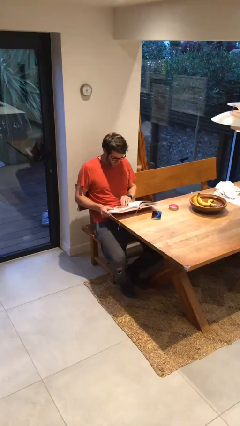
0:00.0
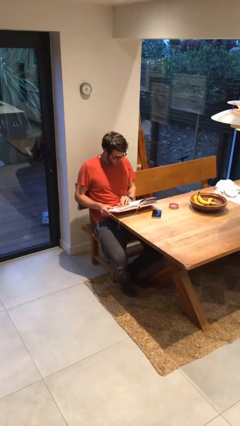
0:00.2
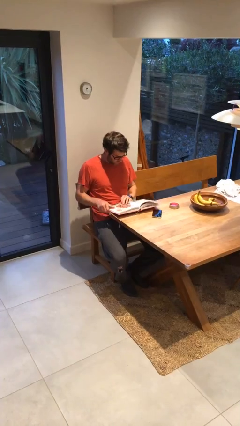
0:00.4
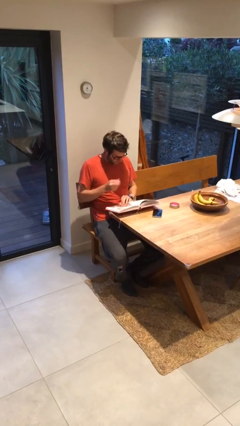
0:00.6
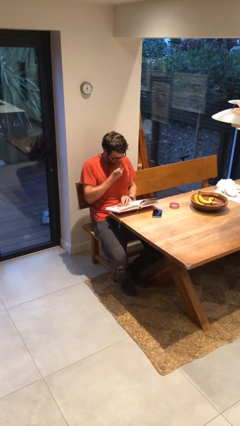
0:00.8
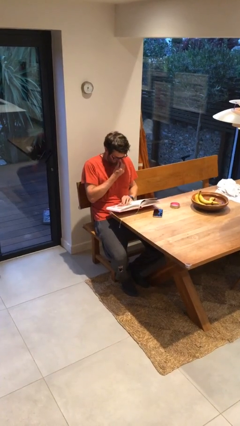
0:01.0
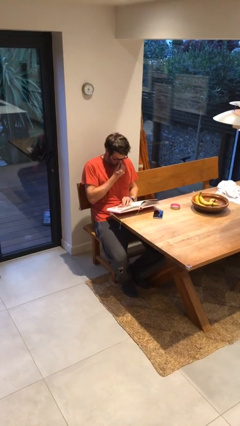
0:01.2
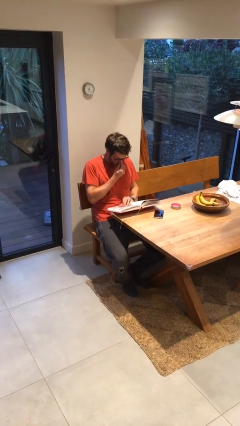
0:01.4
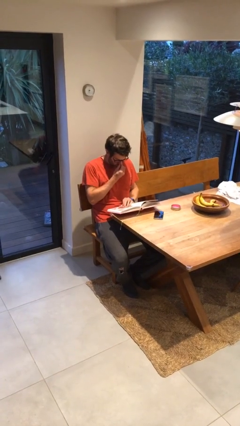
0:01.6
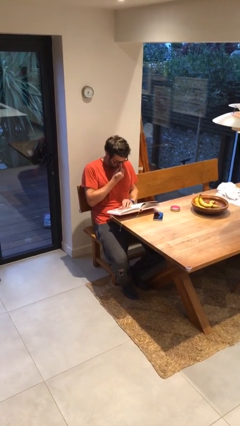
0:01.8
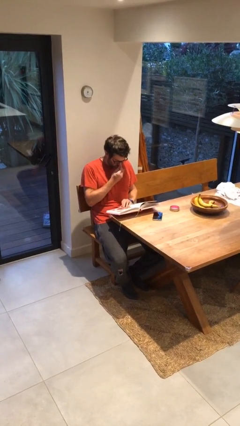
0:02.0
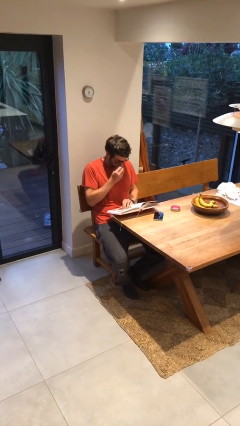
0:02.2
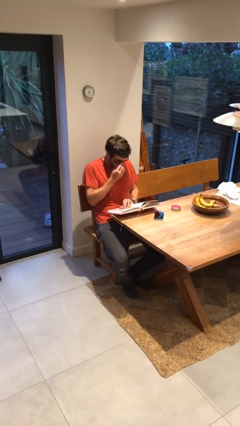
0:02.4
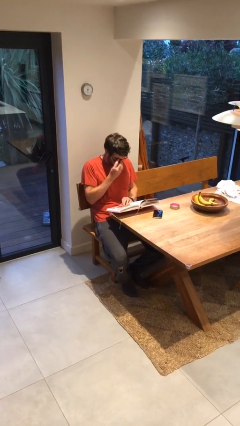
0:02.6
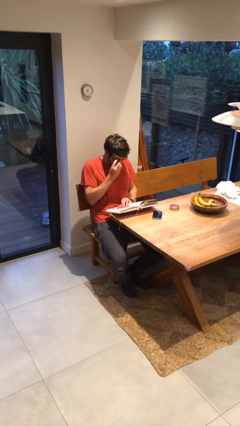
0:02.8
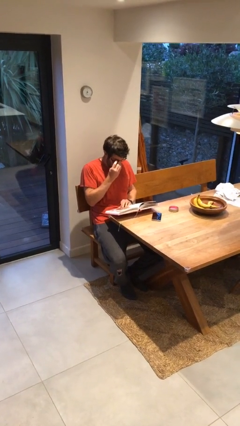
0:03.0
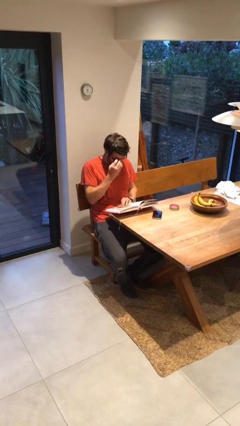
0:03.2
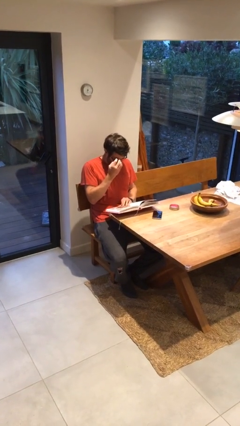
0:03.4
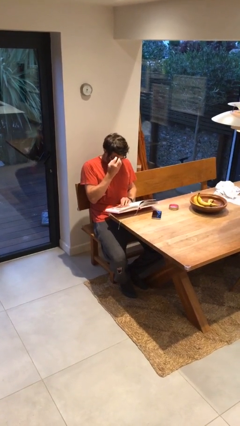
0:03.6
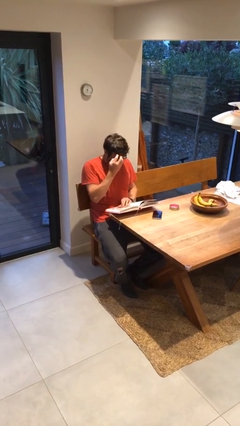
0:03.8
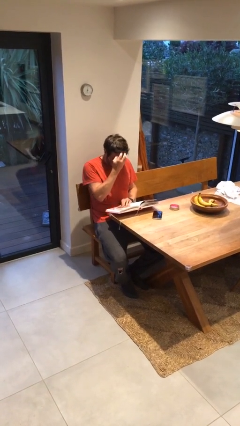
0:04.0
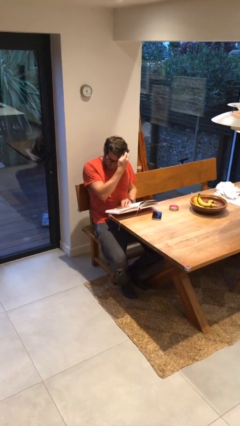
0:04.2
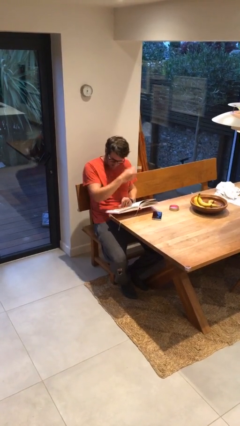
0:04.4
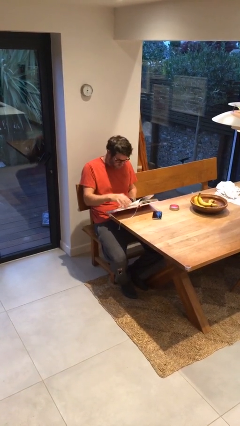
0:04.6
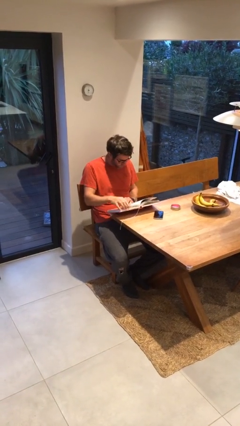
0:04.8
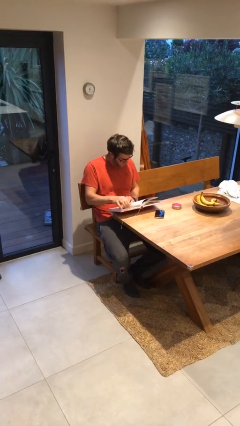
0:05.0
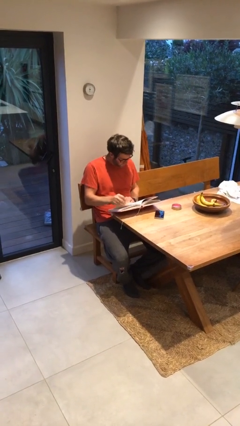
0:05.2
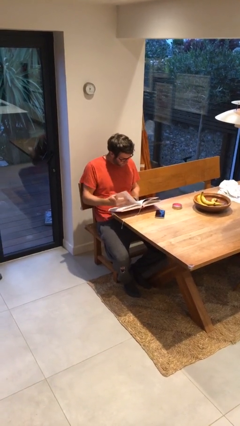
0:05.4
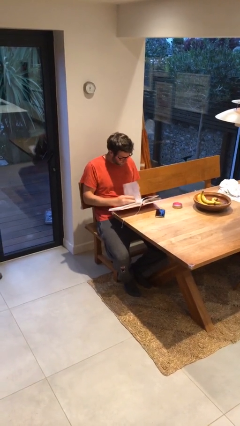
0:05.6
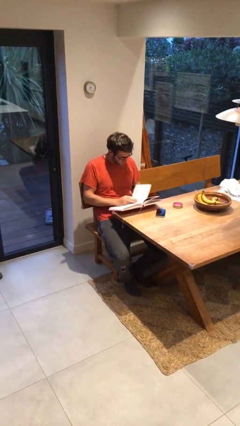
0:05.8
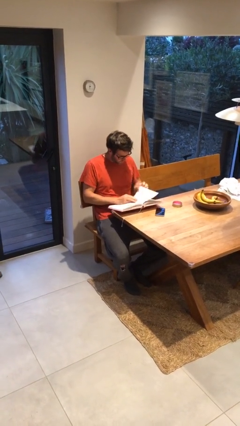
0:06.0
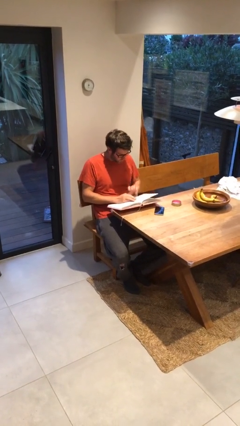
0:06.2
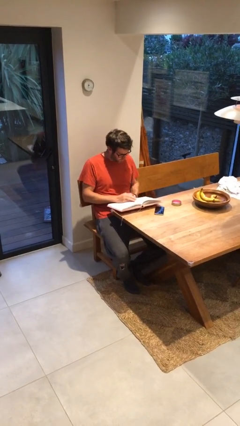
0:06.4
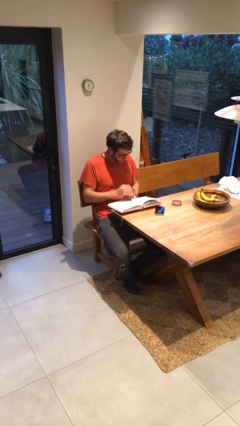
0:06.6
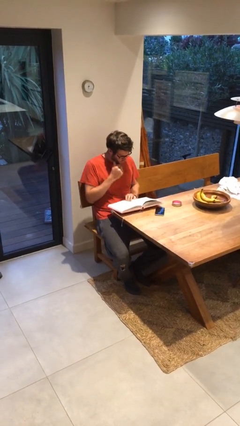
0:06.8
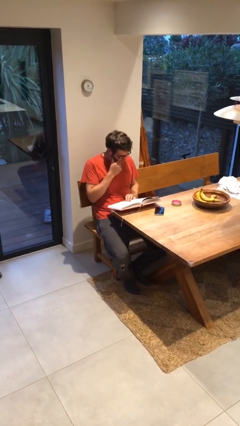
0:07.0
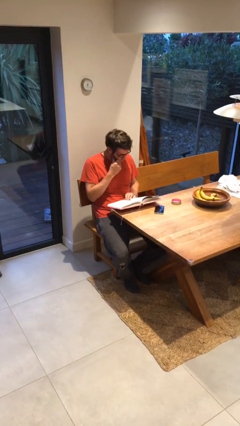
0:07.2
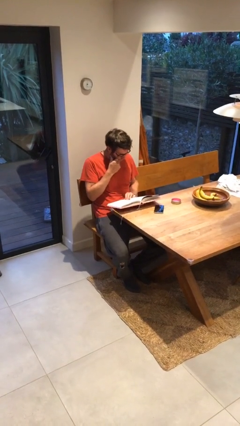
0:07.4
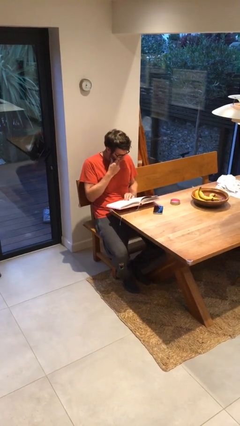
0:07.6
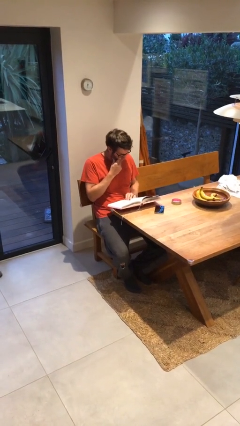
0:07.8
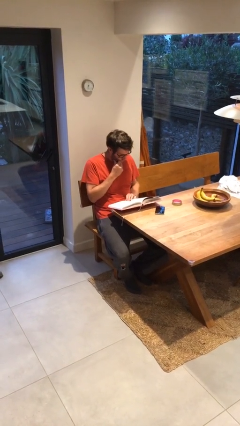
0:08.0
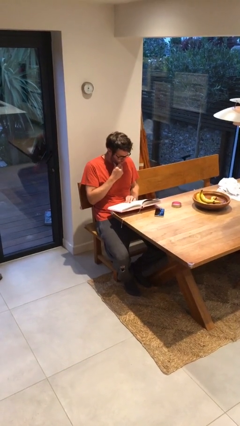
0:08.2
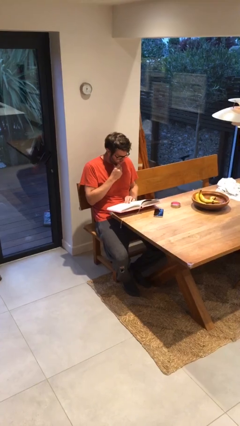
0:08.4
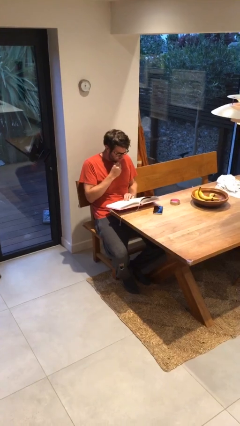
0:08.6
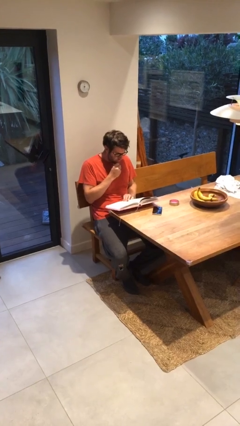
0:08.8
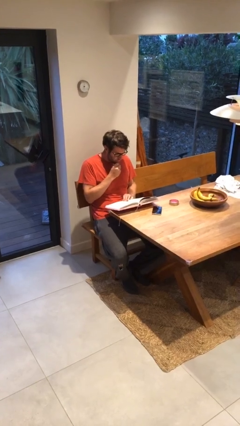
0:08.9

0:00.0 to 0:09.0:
person reads document

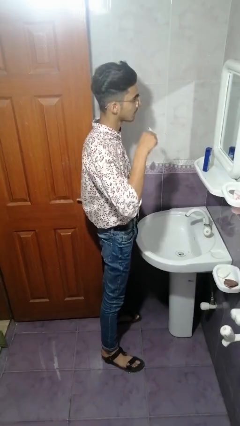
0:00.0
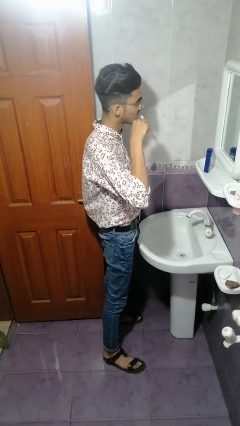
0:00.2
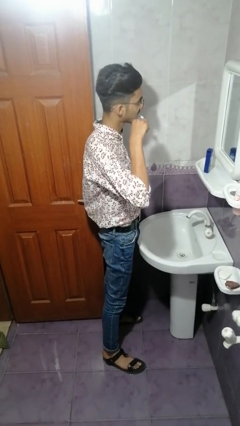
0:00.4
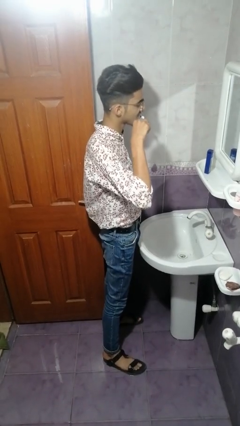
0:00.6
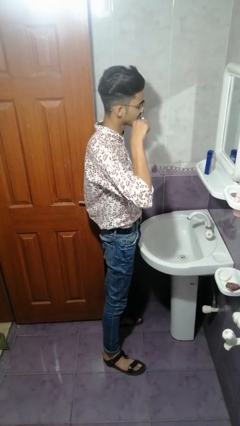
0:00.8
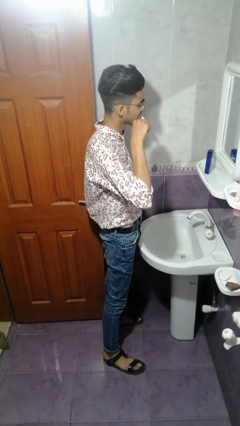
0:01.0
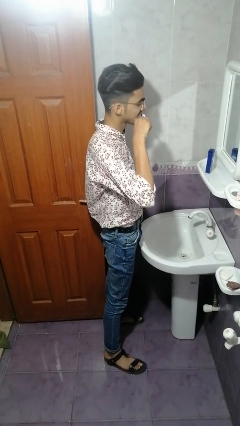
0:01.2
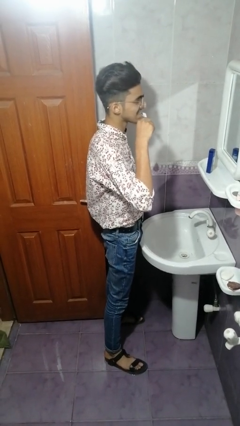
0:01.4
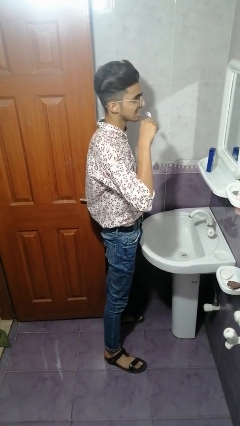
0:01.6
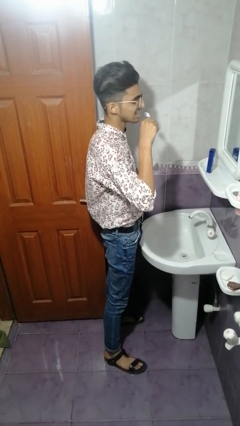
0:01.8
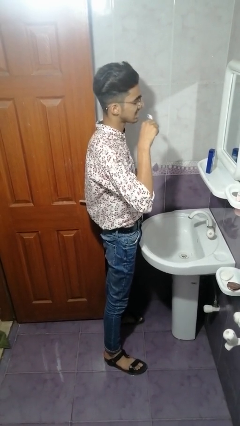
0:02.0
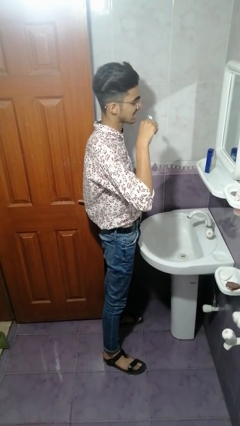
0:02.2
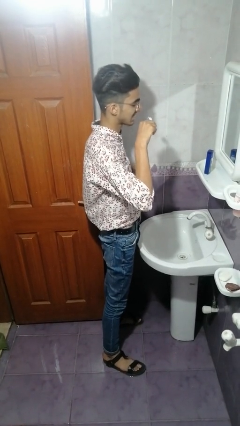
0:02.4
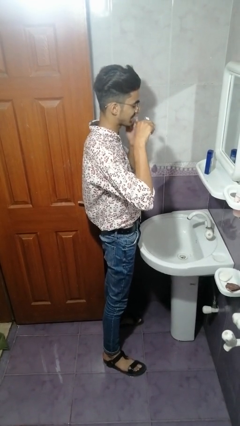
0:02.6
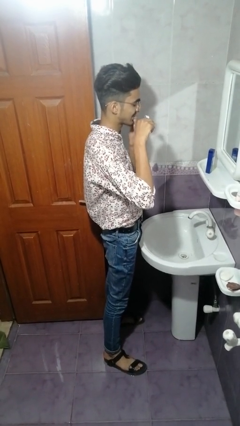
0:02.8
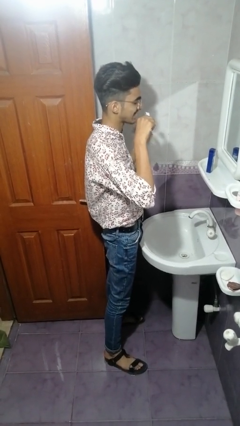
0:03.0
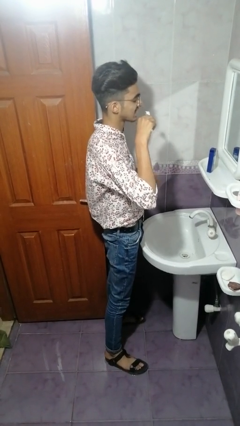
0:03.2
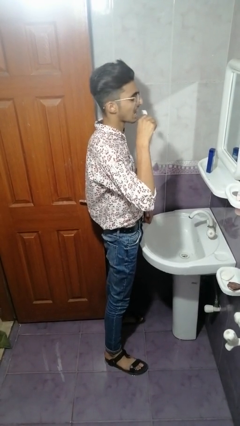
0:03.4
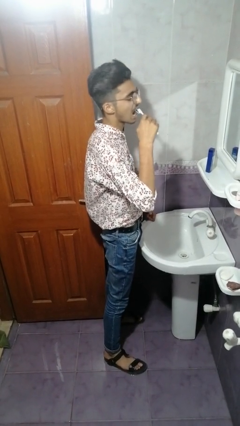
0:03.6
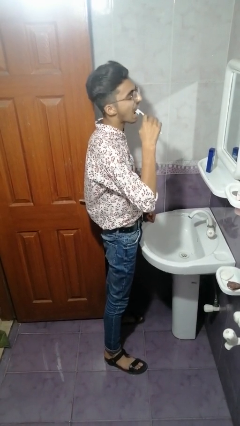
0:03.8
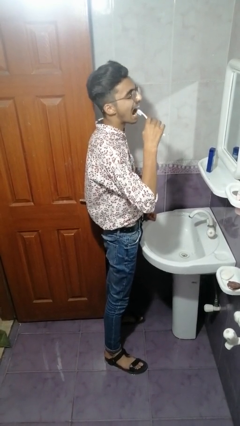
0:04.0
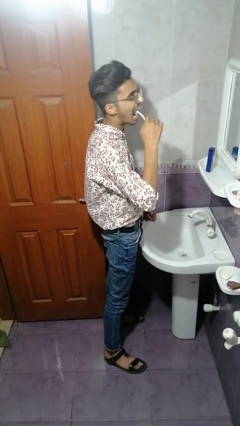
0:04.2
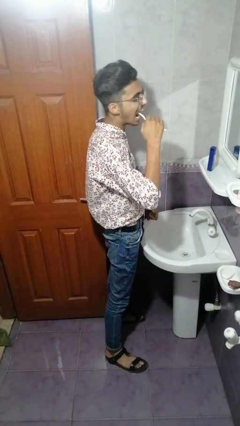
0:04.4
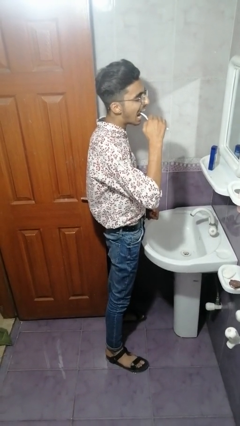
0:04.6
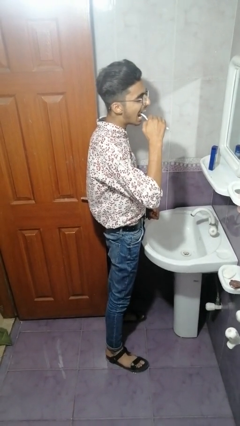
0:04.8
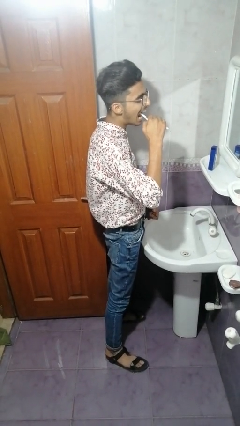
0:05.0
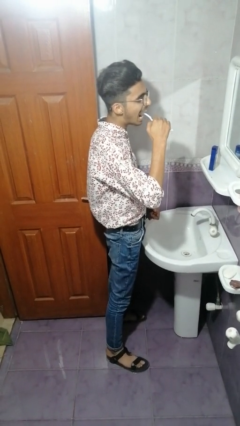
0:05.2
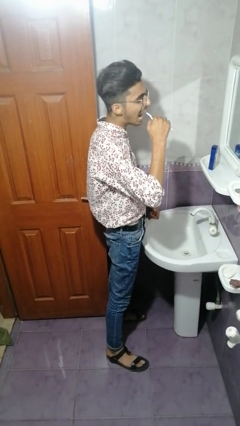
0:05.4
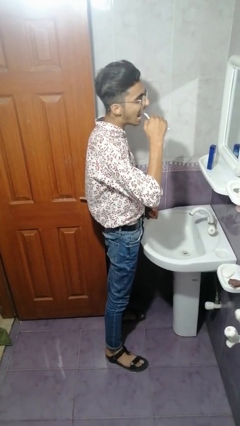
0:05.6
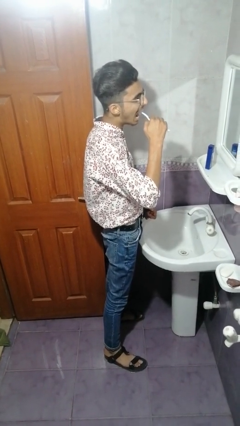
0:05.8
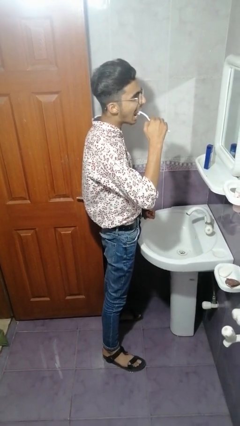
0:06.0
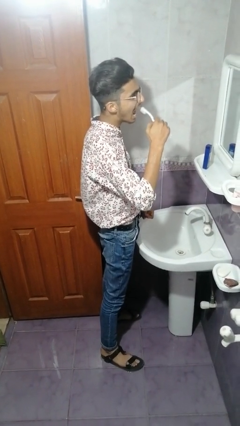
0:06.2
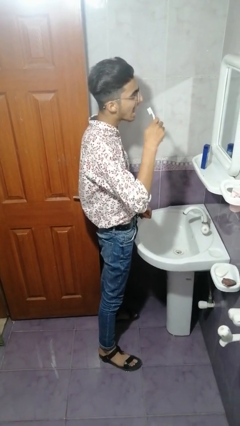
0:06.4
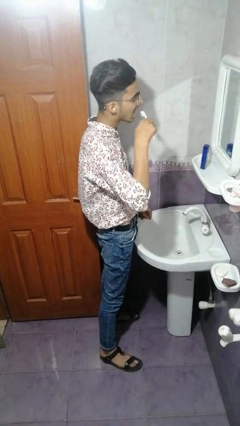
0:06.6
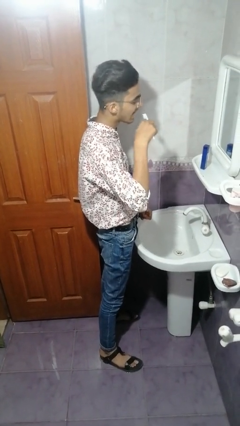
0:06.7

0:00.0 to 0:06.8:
person brushes teeth

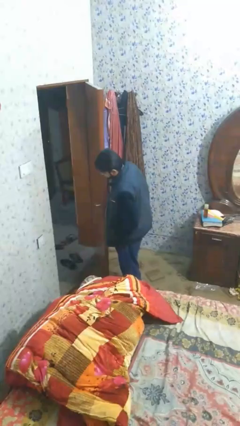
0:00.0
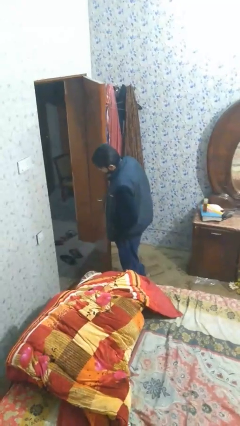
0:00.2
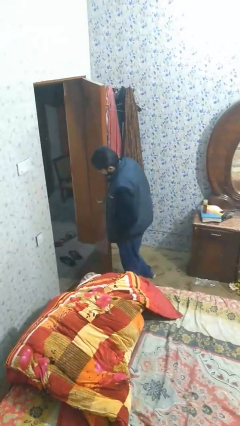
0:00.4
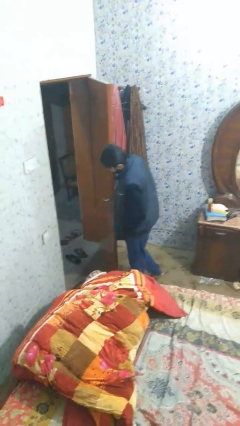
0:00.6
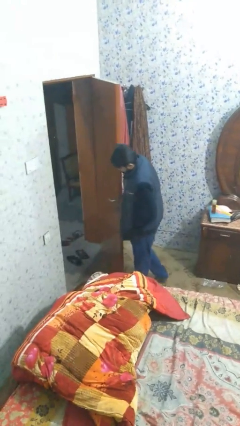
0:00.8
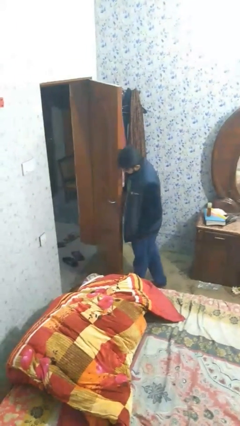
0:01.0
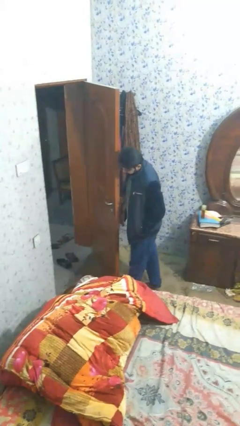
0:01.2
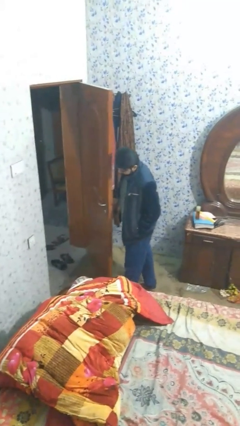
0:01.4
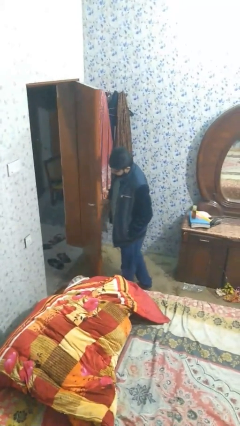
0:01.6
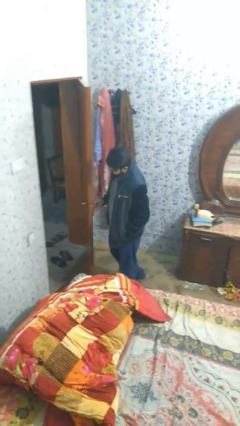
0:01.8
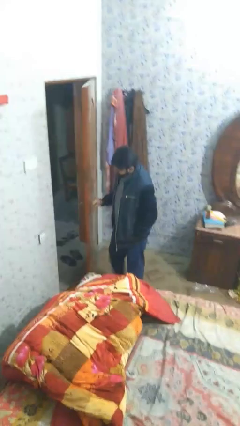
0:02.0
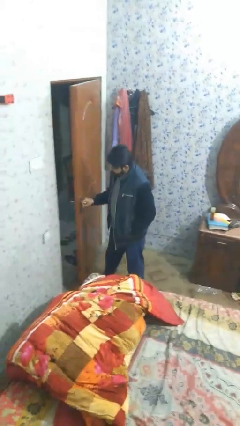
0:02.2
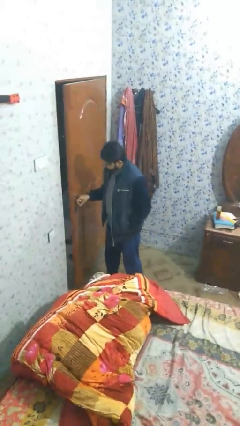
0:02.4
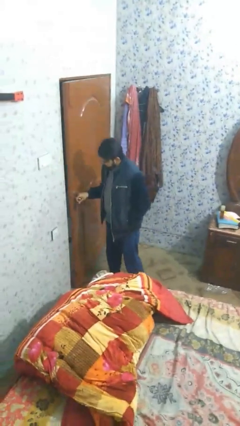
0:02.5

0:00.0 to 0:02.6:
person opens facility door
